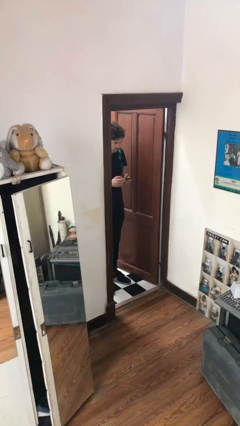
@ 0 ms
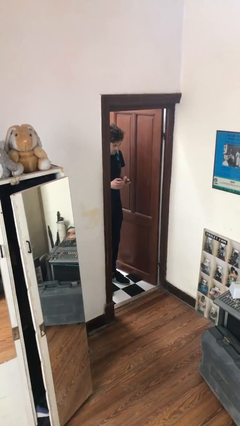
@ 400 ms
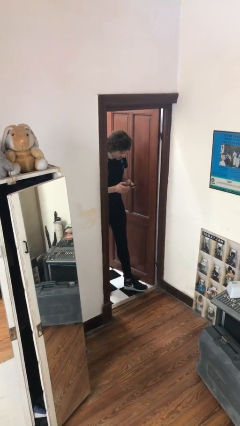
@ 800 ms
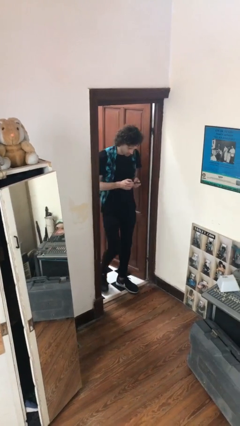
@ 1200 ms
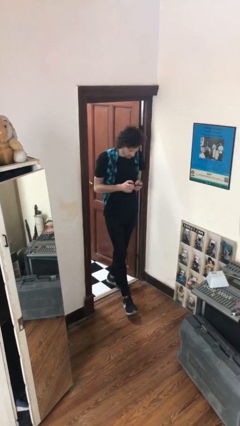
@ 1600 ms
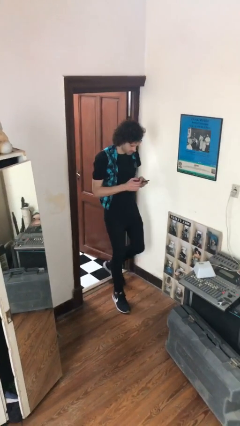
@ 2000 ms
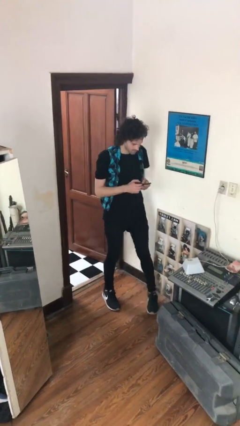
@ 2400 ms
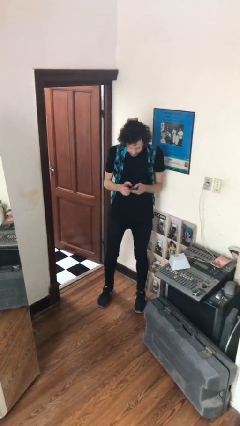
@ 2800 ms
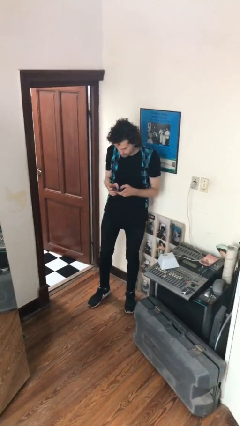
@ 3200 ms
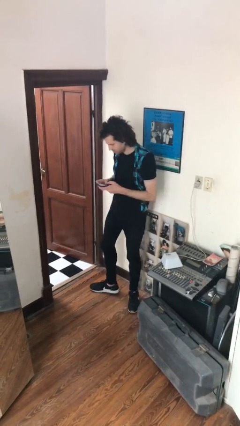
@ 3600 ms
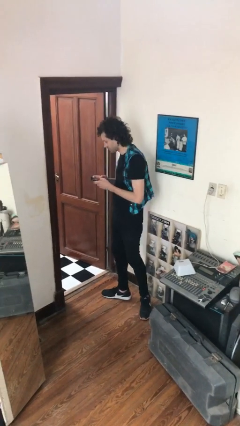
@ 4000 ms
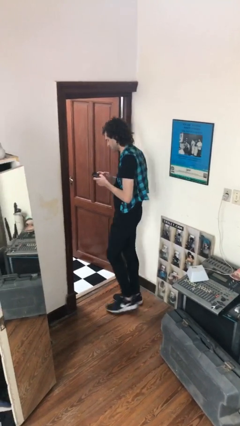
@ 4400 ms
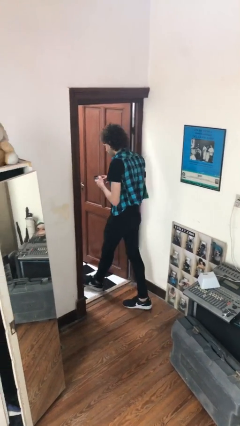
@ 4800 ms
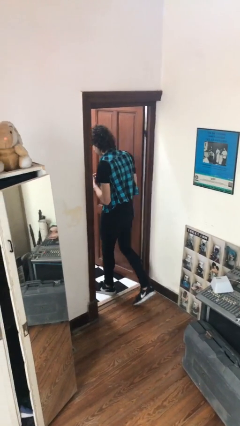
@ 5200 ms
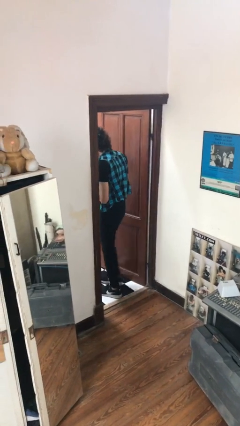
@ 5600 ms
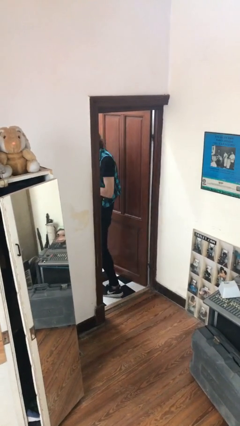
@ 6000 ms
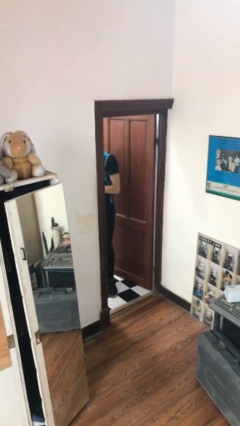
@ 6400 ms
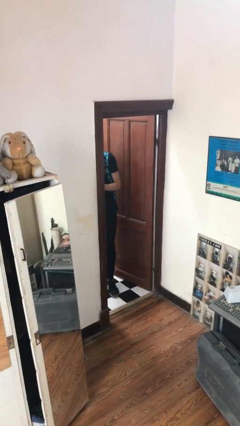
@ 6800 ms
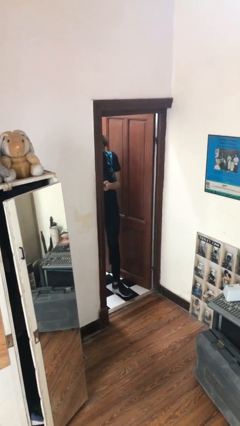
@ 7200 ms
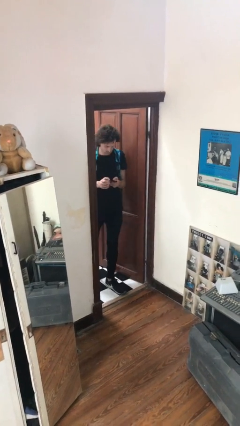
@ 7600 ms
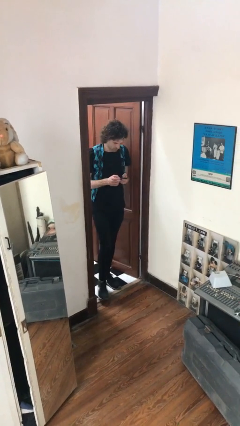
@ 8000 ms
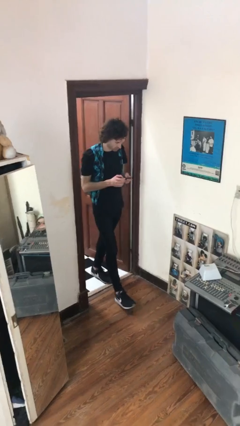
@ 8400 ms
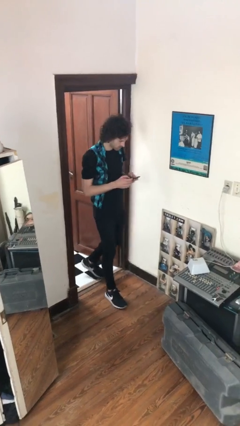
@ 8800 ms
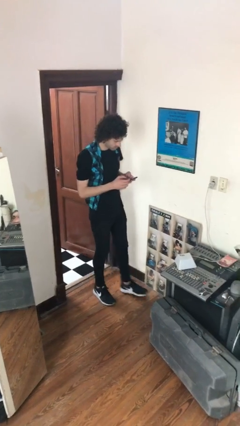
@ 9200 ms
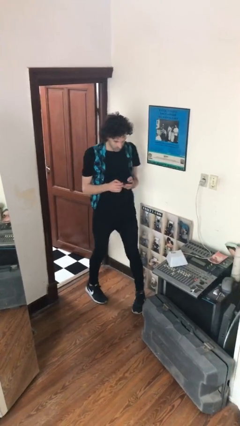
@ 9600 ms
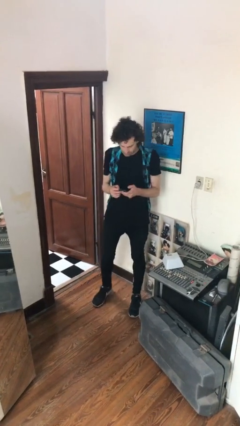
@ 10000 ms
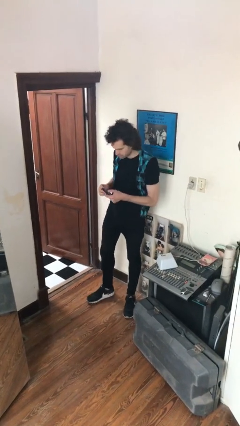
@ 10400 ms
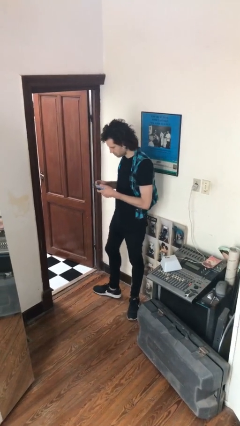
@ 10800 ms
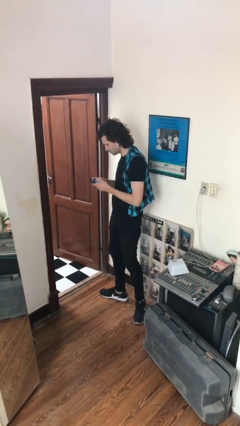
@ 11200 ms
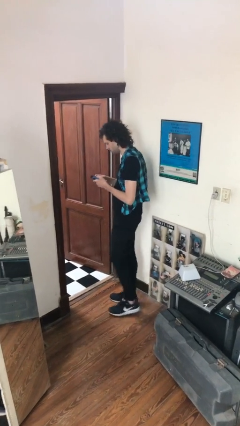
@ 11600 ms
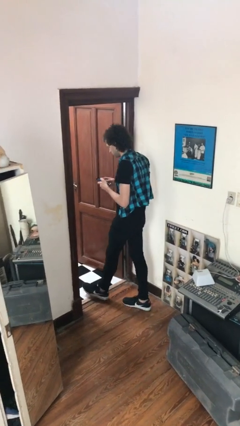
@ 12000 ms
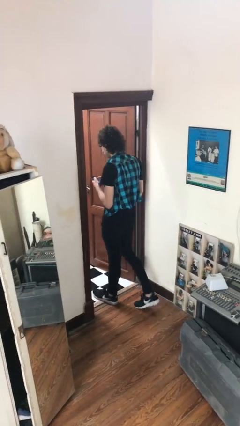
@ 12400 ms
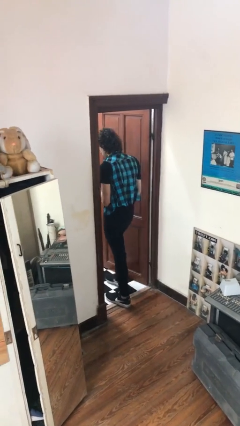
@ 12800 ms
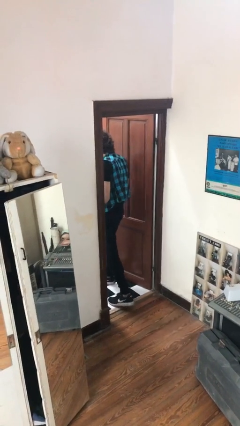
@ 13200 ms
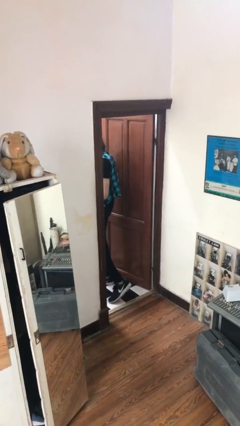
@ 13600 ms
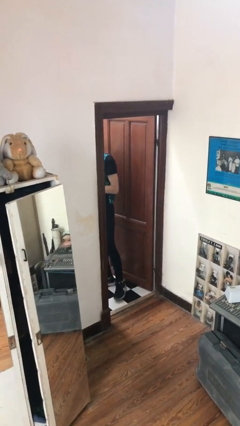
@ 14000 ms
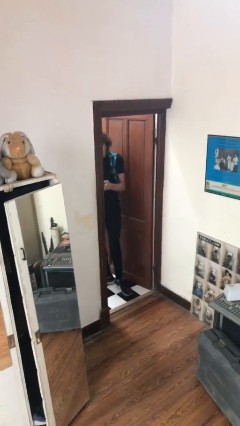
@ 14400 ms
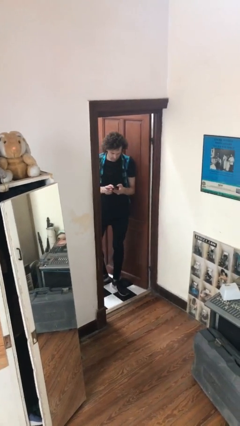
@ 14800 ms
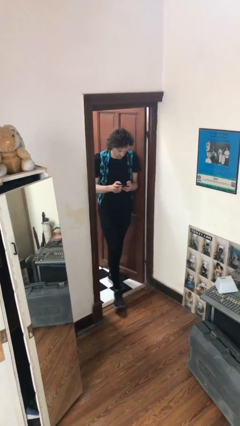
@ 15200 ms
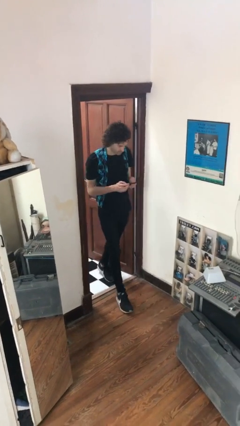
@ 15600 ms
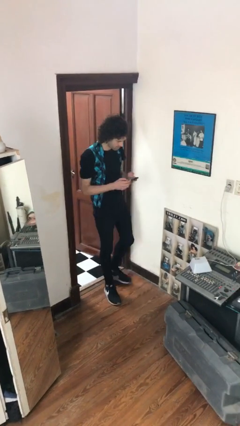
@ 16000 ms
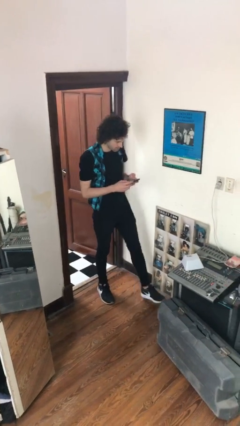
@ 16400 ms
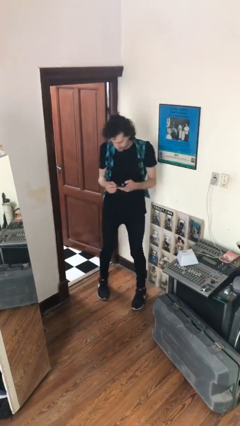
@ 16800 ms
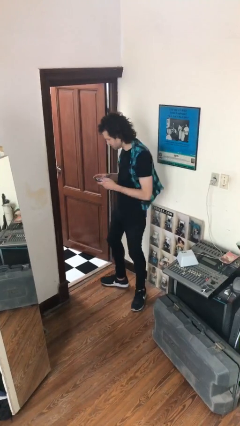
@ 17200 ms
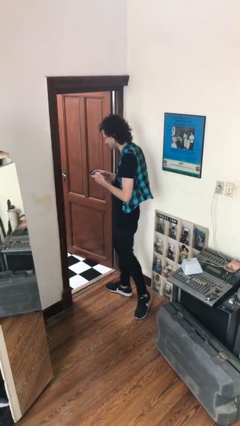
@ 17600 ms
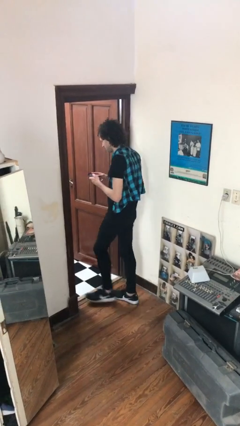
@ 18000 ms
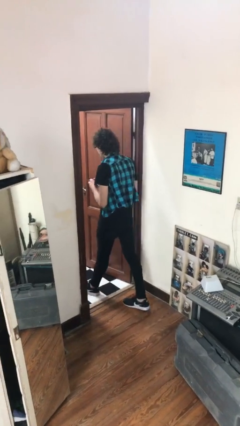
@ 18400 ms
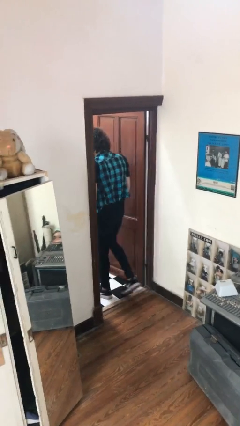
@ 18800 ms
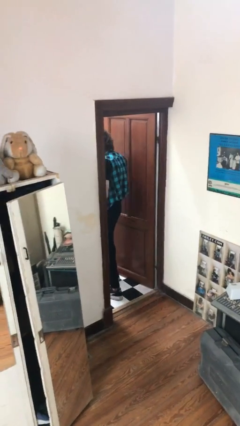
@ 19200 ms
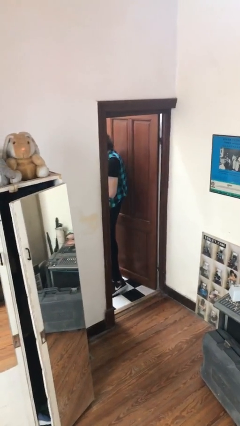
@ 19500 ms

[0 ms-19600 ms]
person texts on phone

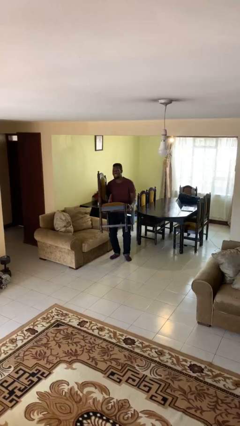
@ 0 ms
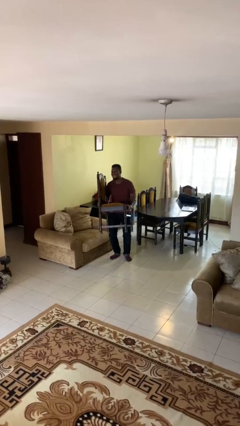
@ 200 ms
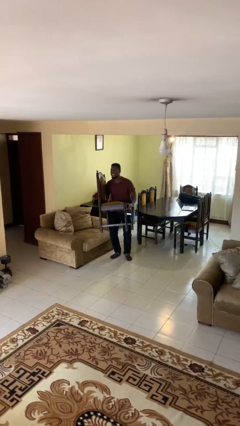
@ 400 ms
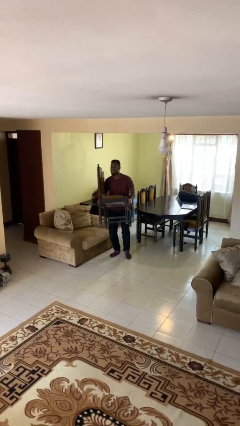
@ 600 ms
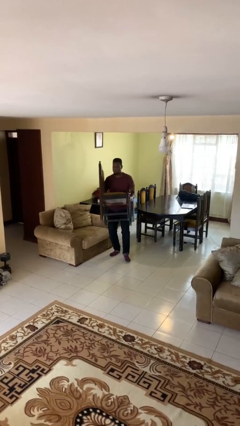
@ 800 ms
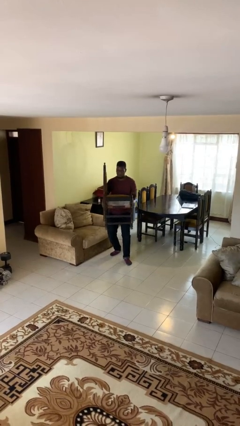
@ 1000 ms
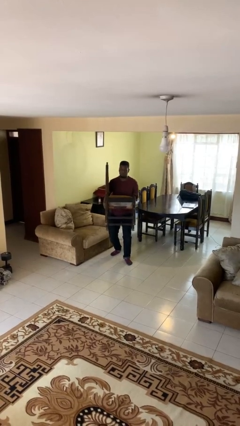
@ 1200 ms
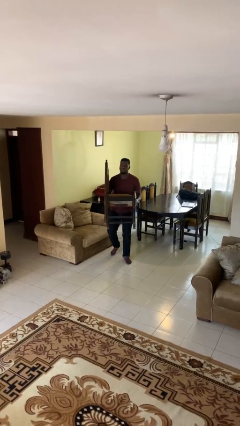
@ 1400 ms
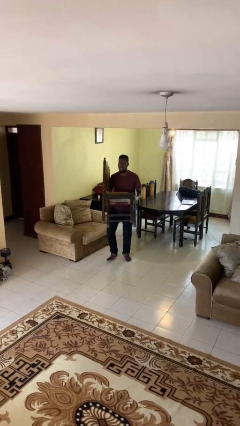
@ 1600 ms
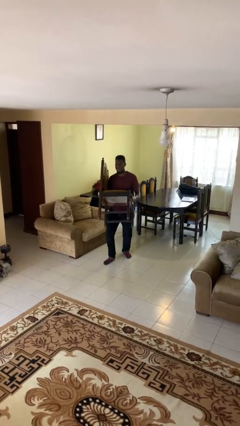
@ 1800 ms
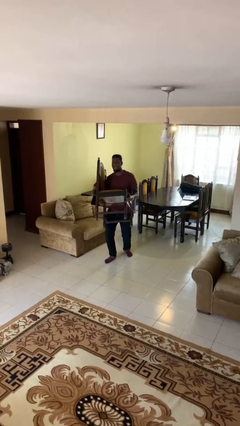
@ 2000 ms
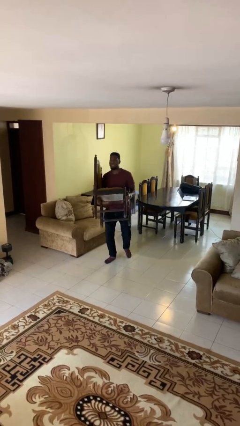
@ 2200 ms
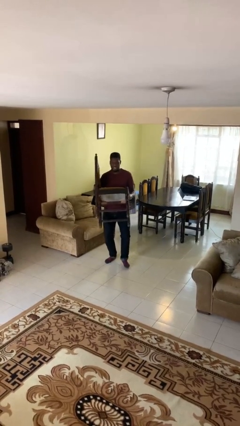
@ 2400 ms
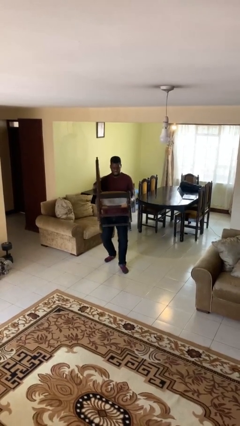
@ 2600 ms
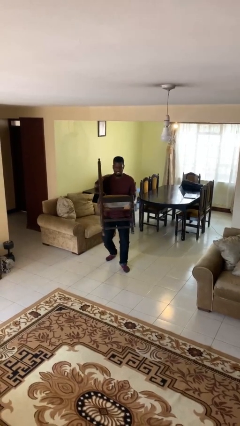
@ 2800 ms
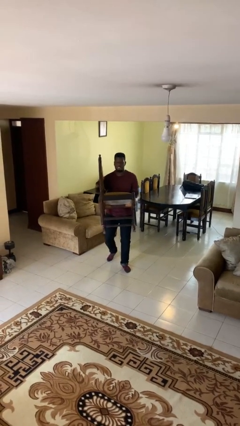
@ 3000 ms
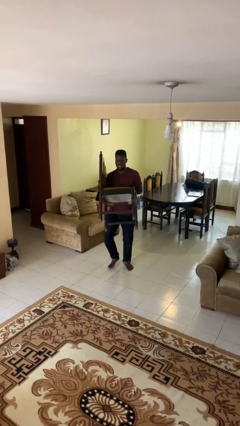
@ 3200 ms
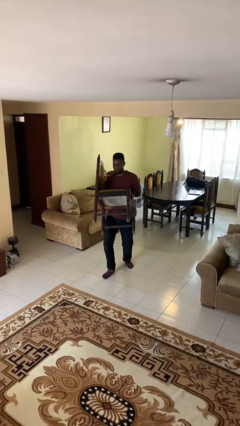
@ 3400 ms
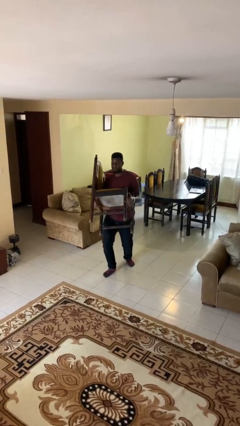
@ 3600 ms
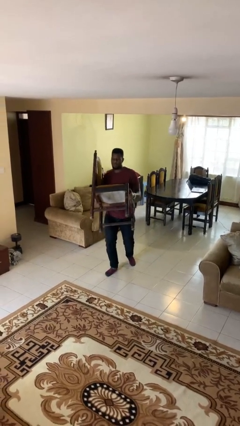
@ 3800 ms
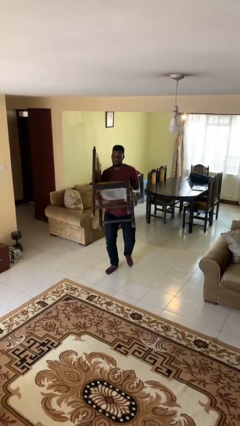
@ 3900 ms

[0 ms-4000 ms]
person carries heavy object

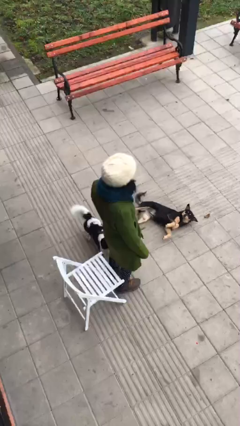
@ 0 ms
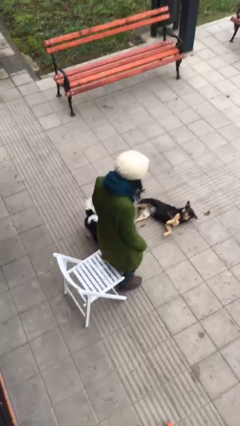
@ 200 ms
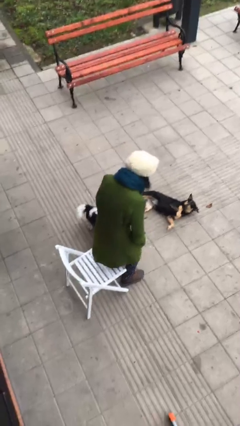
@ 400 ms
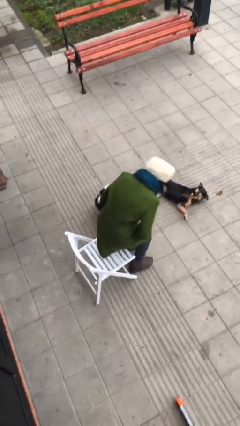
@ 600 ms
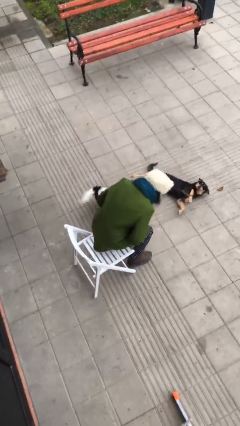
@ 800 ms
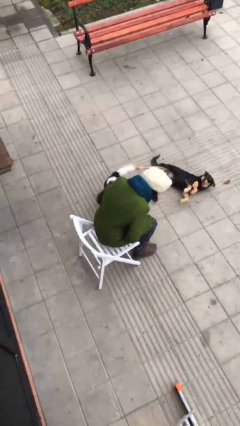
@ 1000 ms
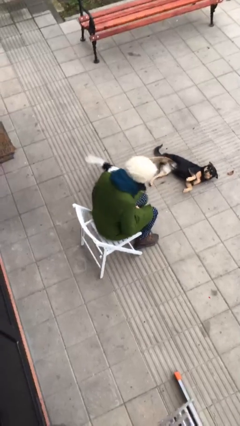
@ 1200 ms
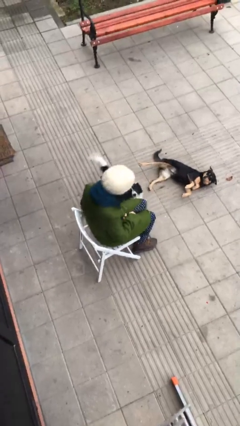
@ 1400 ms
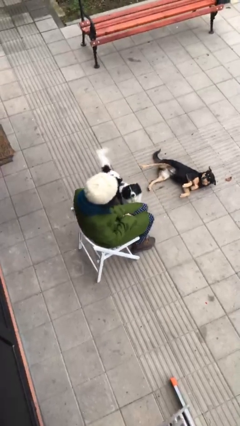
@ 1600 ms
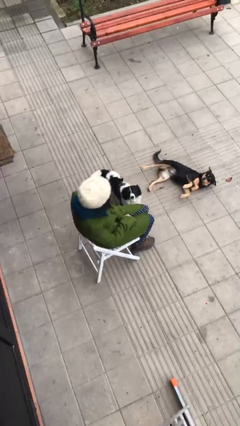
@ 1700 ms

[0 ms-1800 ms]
person sits down

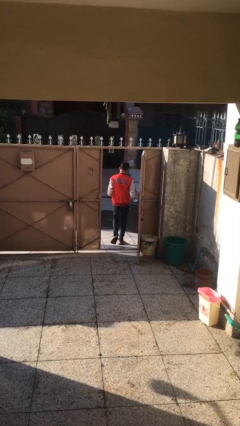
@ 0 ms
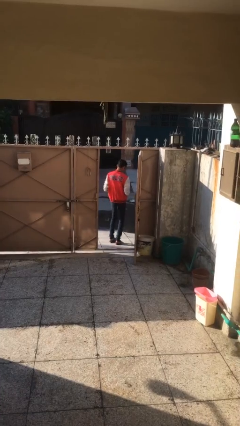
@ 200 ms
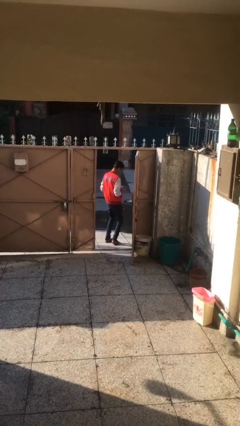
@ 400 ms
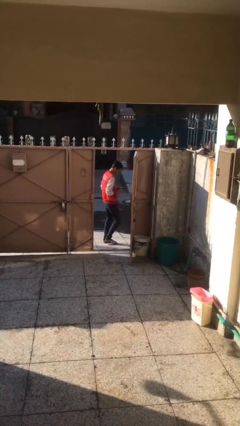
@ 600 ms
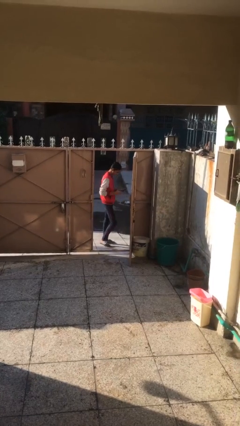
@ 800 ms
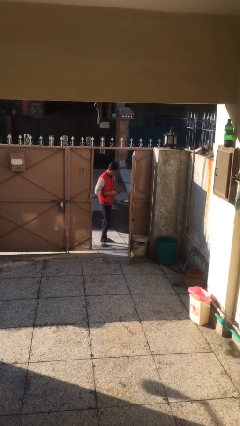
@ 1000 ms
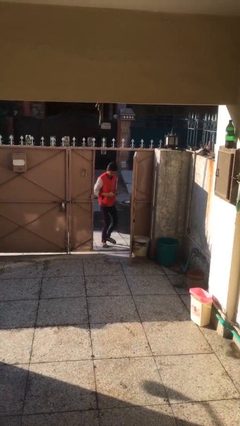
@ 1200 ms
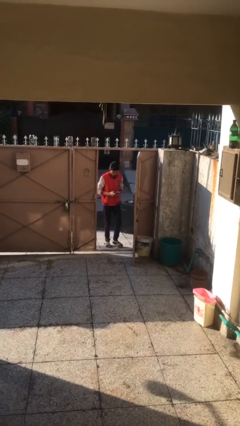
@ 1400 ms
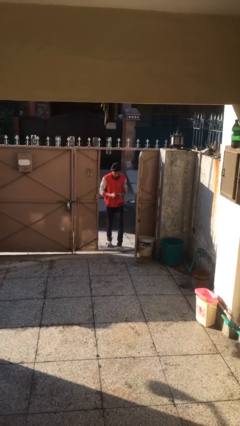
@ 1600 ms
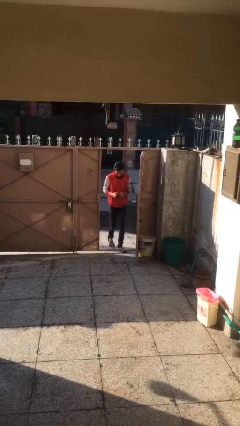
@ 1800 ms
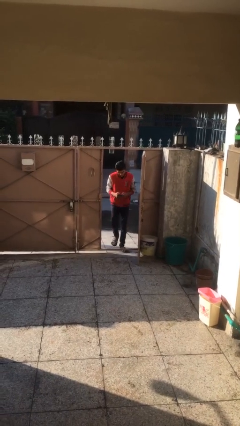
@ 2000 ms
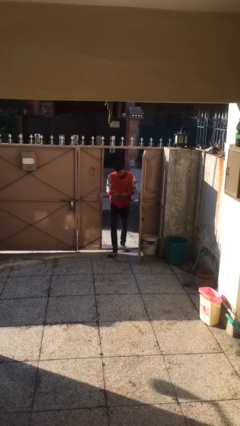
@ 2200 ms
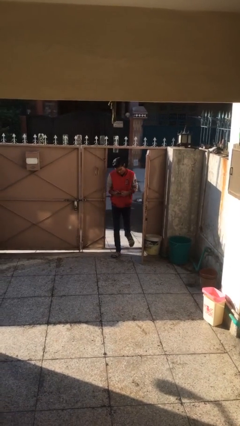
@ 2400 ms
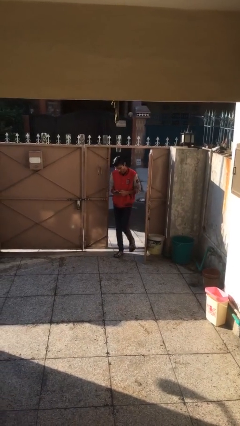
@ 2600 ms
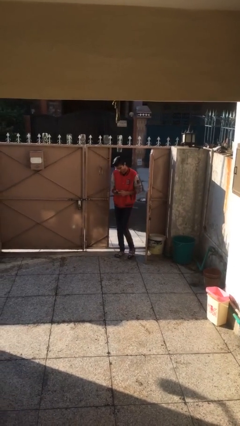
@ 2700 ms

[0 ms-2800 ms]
person enters scene through structure
